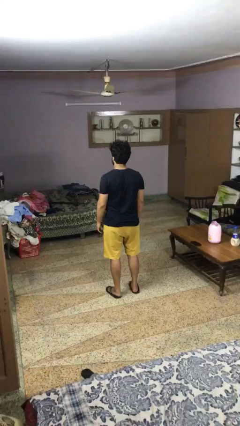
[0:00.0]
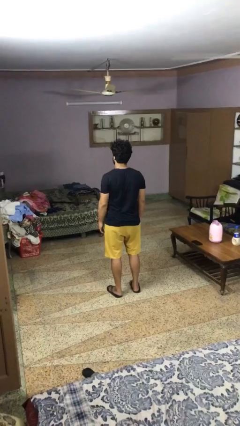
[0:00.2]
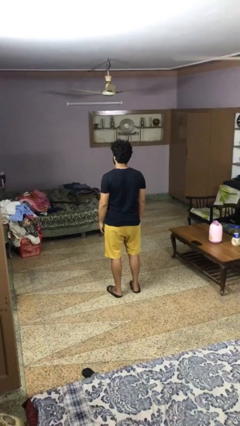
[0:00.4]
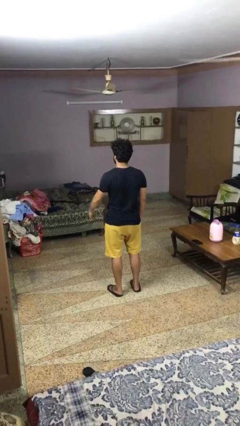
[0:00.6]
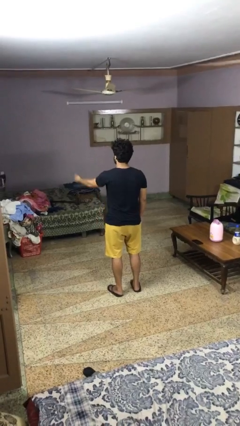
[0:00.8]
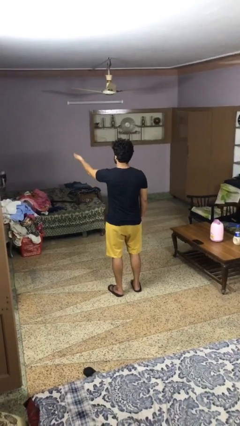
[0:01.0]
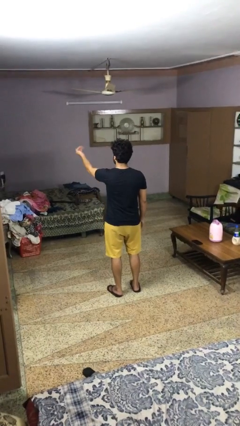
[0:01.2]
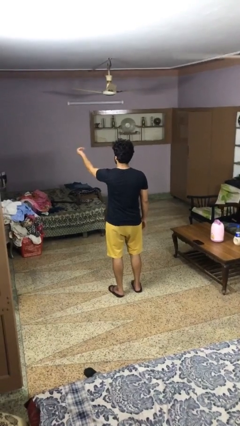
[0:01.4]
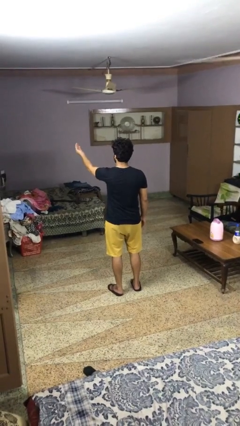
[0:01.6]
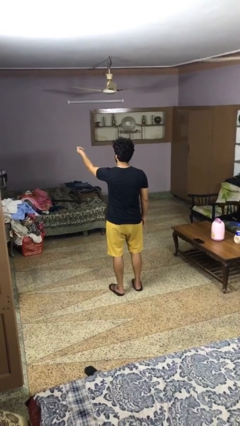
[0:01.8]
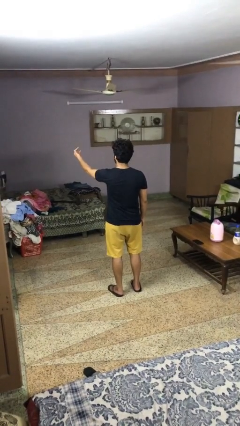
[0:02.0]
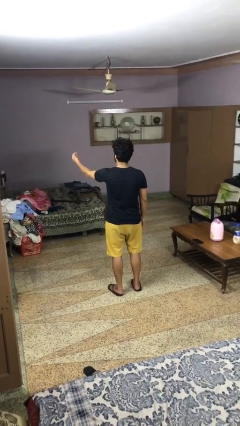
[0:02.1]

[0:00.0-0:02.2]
person gestures come here

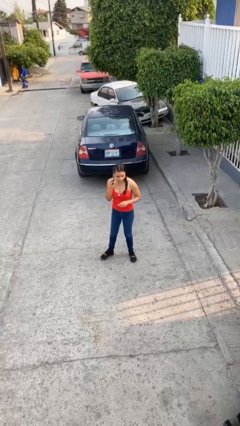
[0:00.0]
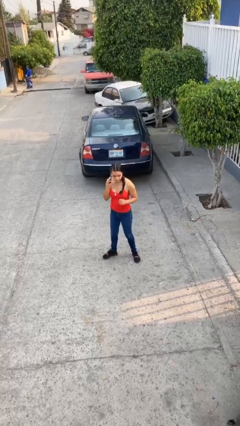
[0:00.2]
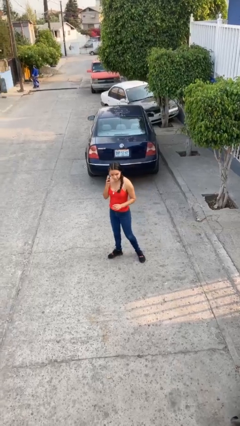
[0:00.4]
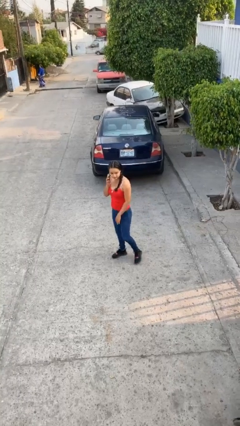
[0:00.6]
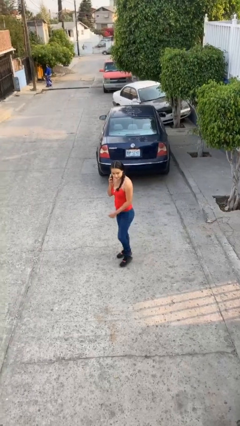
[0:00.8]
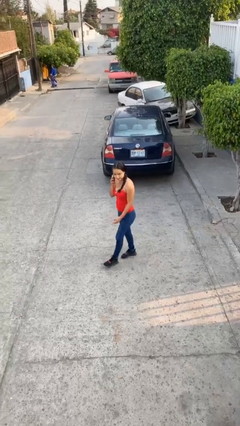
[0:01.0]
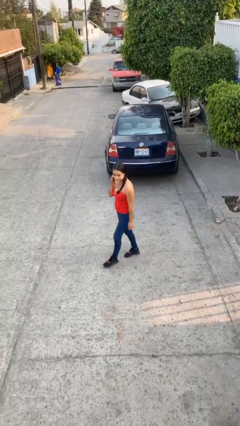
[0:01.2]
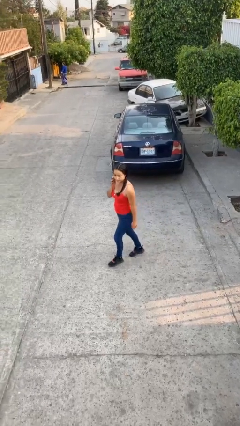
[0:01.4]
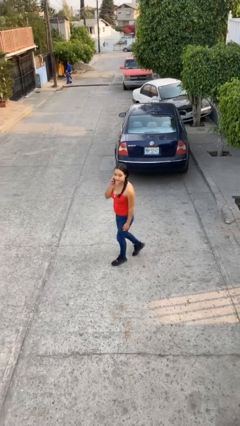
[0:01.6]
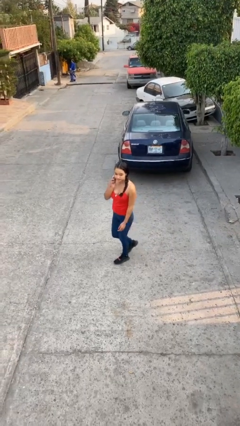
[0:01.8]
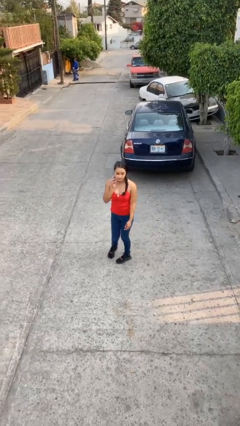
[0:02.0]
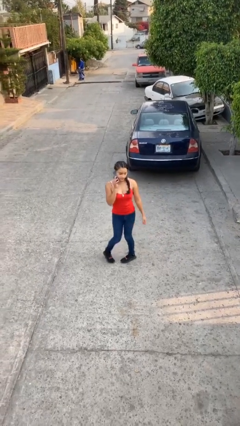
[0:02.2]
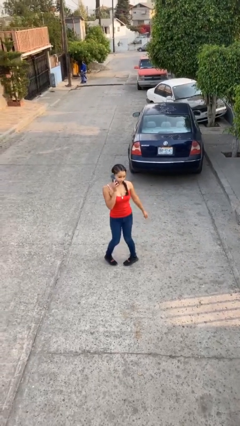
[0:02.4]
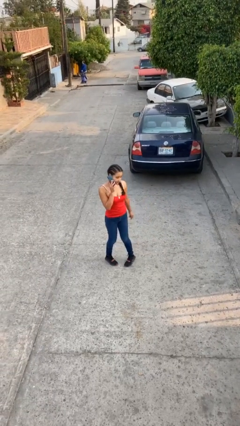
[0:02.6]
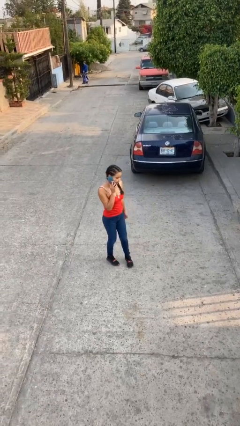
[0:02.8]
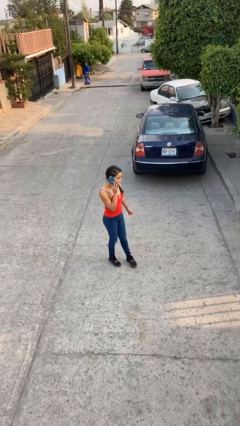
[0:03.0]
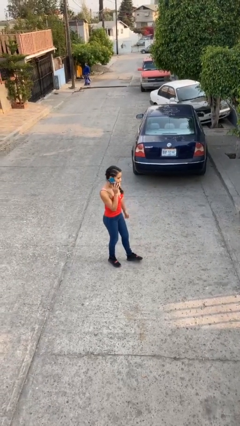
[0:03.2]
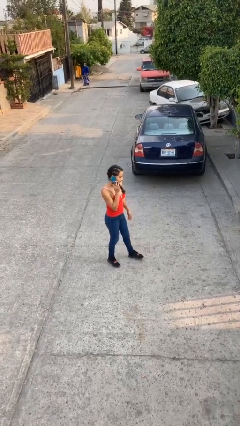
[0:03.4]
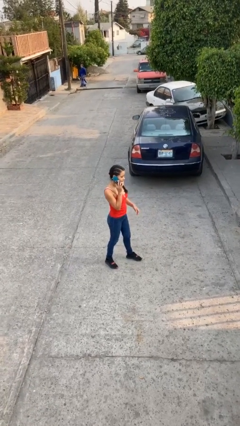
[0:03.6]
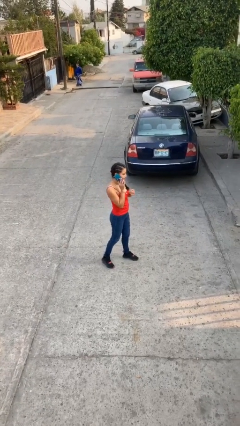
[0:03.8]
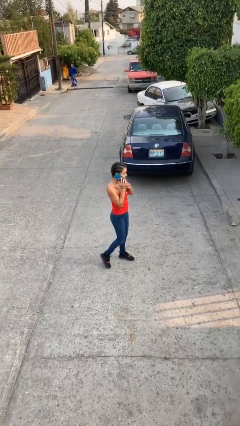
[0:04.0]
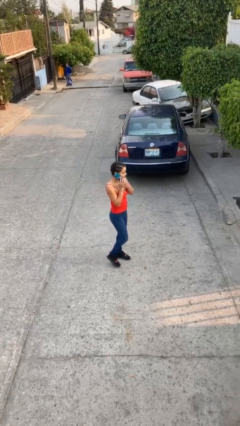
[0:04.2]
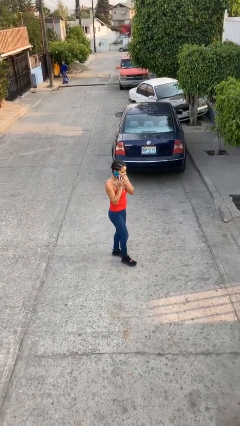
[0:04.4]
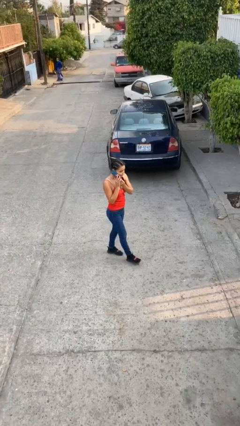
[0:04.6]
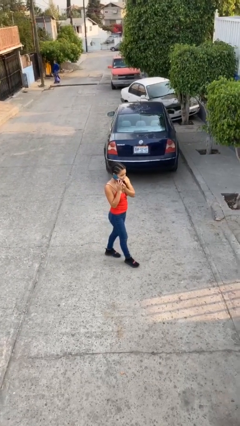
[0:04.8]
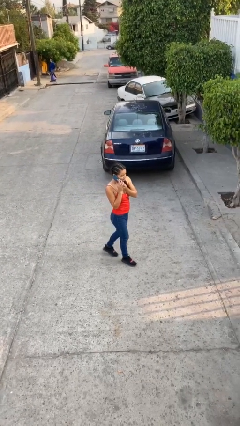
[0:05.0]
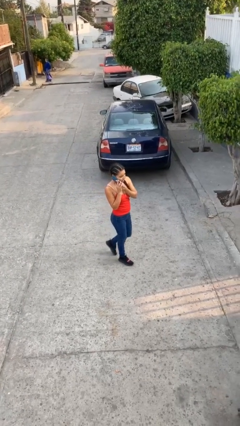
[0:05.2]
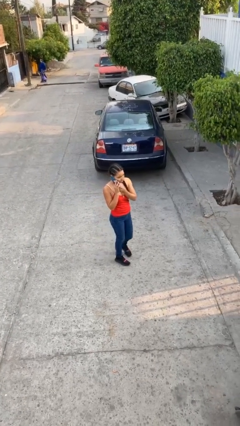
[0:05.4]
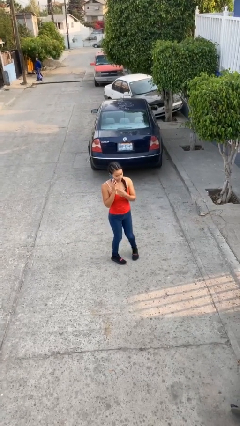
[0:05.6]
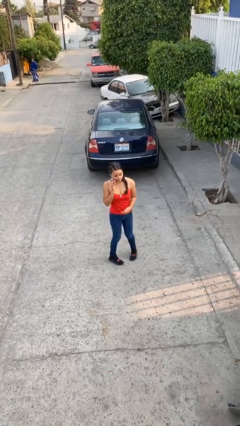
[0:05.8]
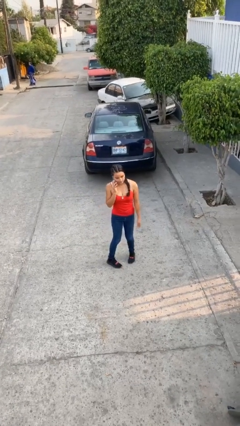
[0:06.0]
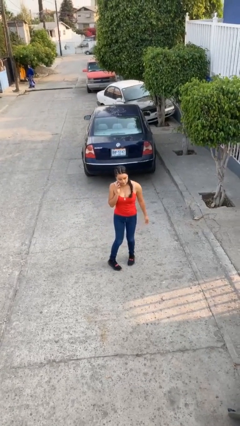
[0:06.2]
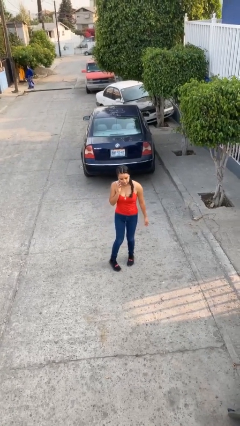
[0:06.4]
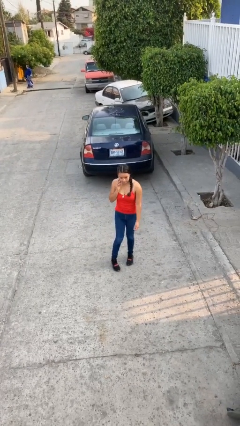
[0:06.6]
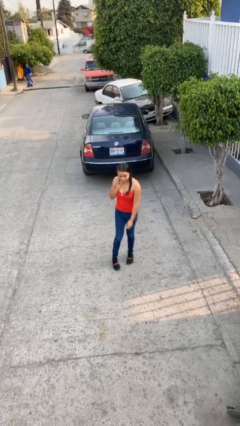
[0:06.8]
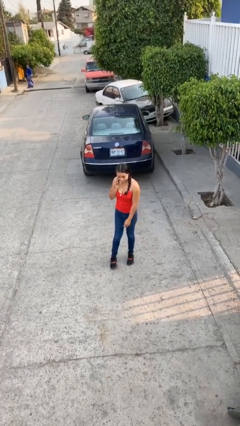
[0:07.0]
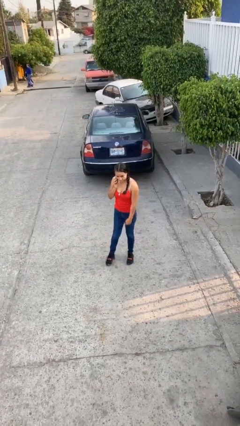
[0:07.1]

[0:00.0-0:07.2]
person talks on phone

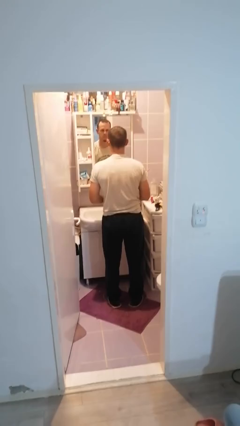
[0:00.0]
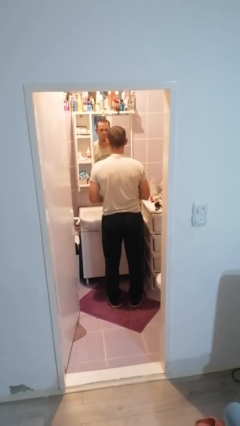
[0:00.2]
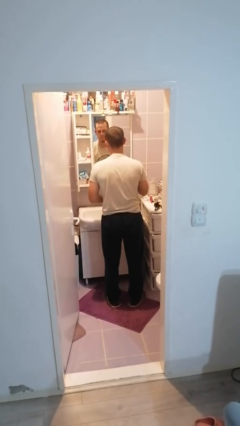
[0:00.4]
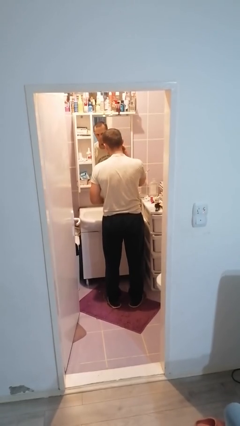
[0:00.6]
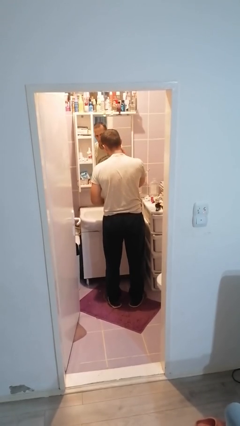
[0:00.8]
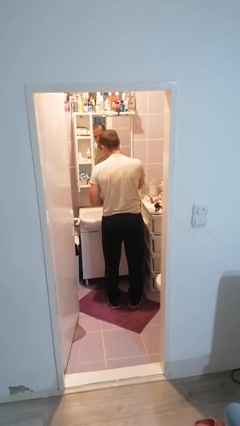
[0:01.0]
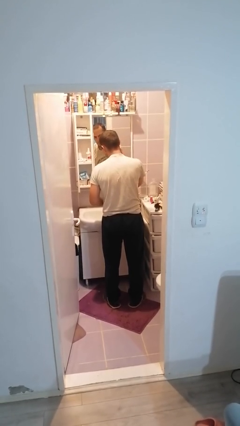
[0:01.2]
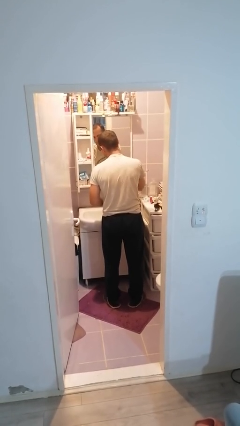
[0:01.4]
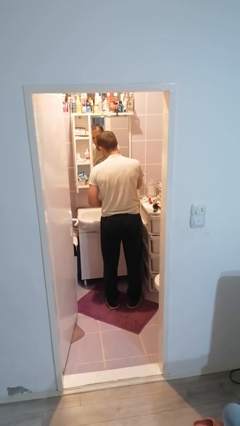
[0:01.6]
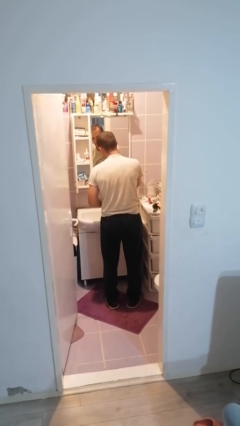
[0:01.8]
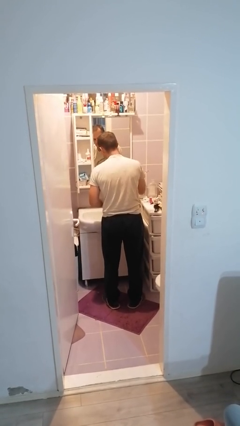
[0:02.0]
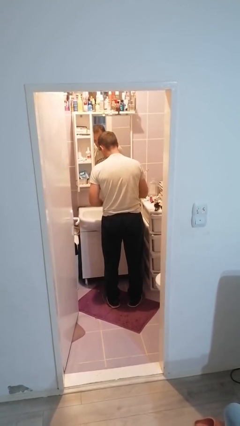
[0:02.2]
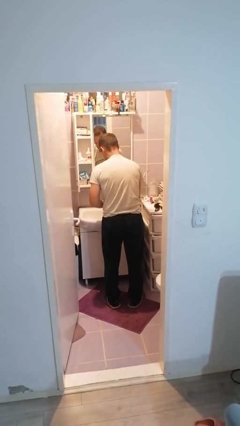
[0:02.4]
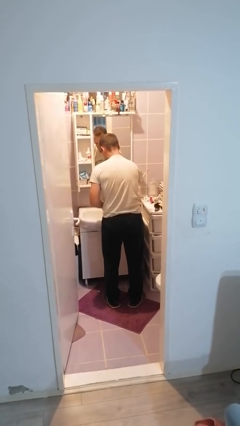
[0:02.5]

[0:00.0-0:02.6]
person applies shaving cream

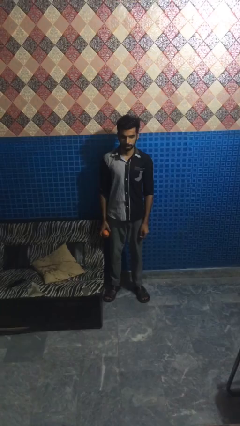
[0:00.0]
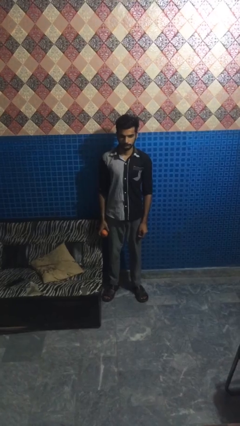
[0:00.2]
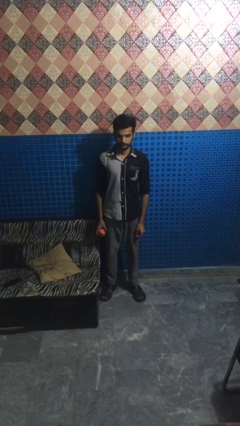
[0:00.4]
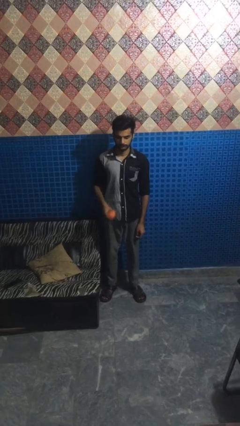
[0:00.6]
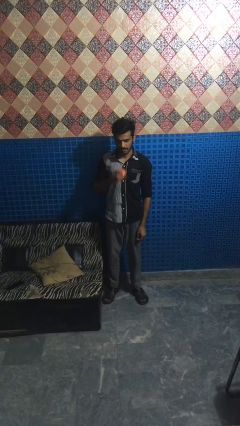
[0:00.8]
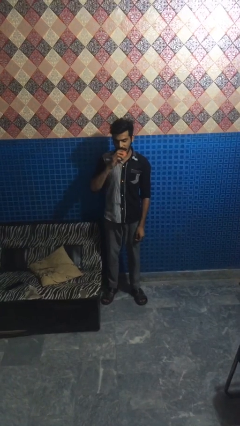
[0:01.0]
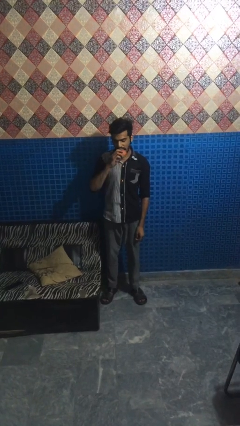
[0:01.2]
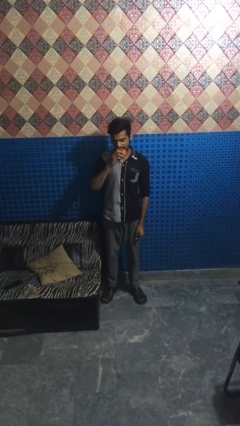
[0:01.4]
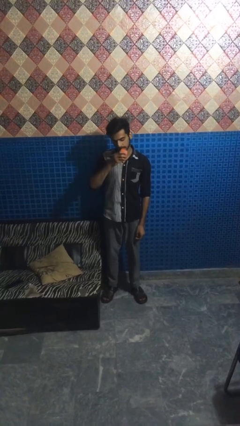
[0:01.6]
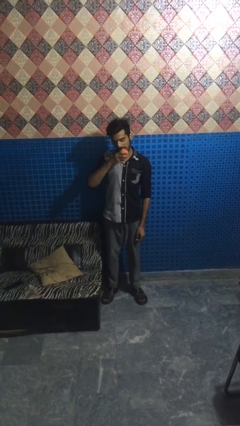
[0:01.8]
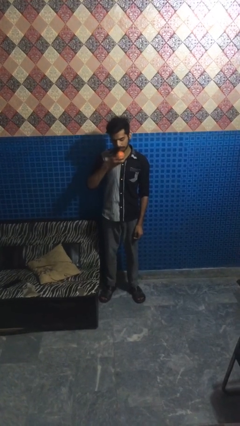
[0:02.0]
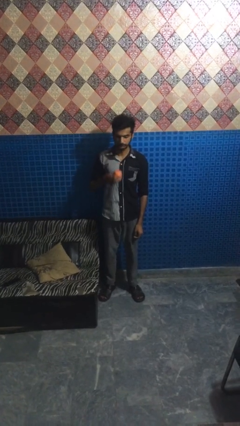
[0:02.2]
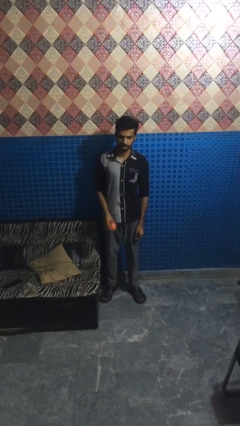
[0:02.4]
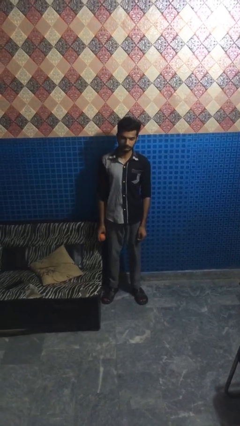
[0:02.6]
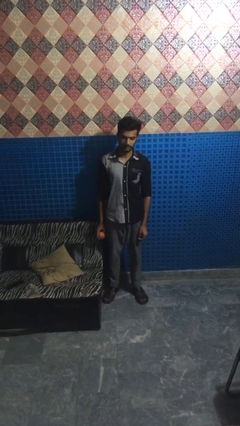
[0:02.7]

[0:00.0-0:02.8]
person eats apple

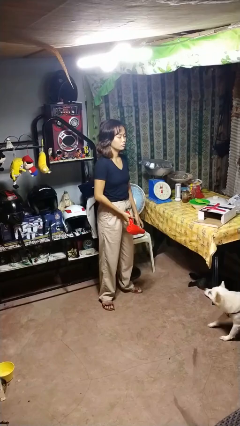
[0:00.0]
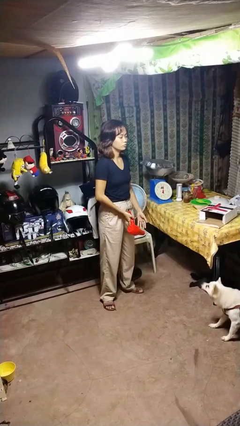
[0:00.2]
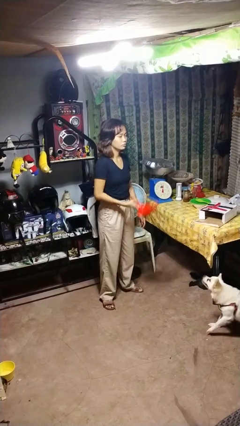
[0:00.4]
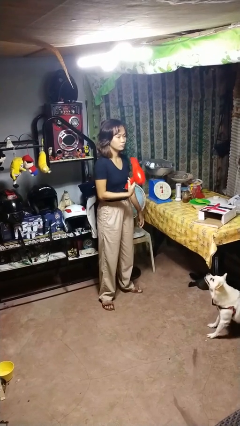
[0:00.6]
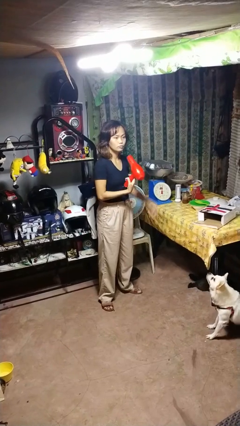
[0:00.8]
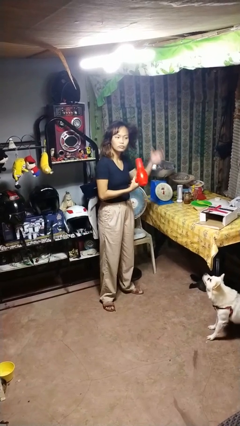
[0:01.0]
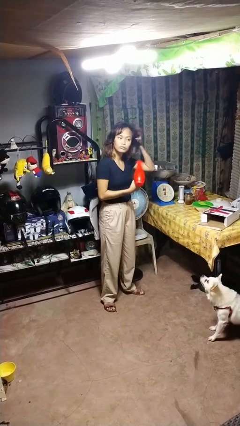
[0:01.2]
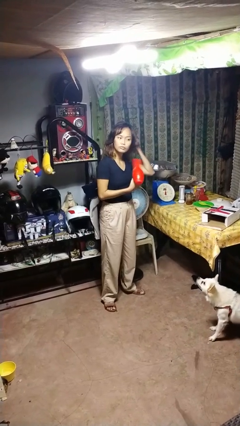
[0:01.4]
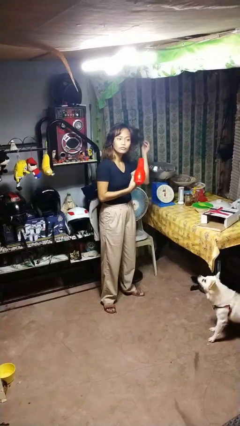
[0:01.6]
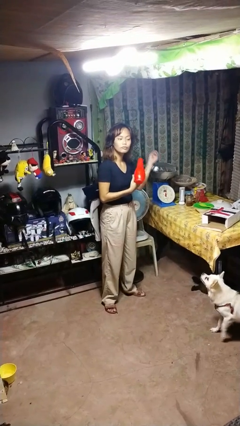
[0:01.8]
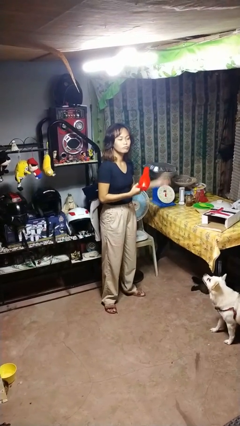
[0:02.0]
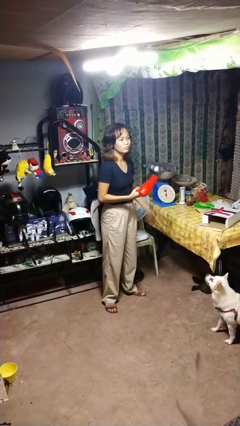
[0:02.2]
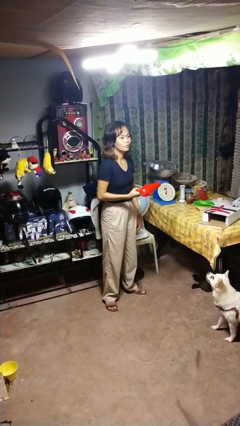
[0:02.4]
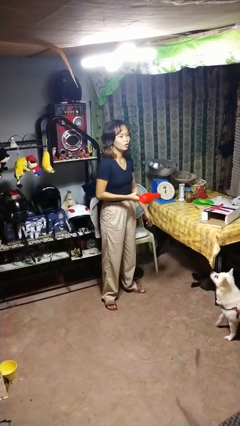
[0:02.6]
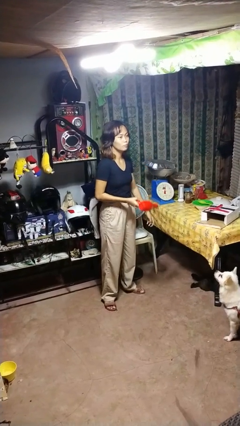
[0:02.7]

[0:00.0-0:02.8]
person dries hair with hairdryer
